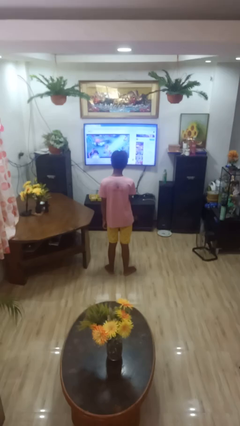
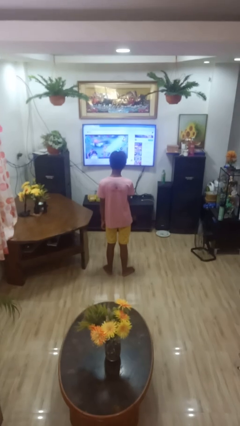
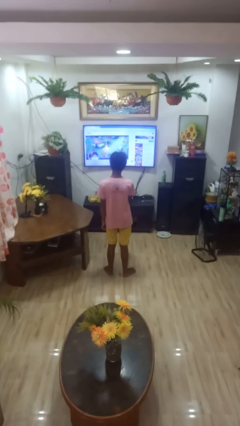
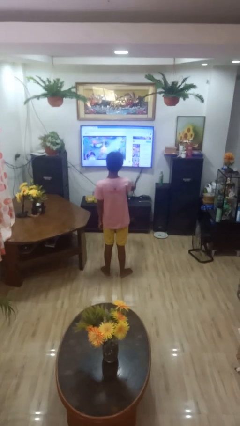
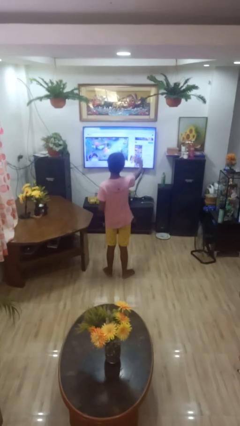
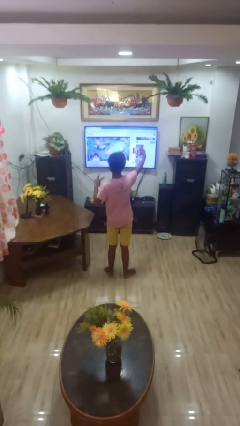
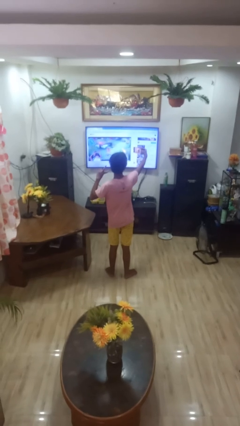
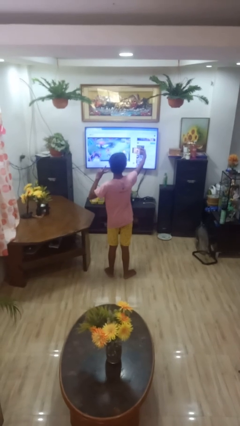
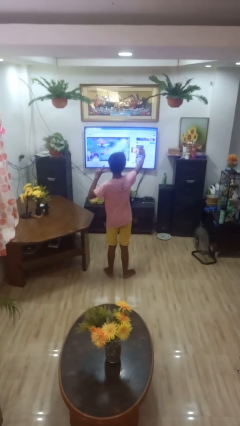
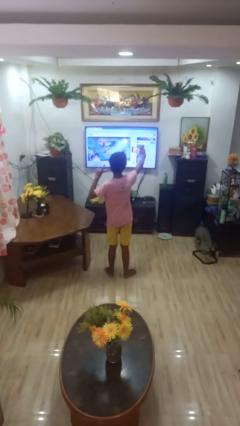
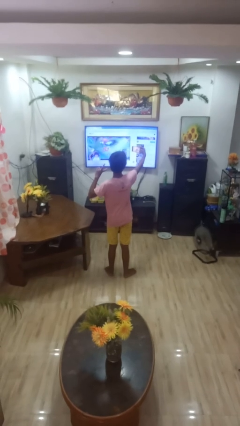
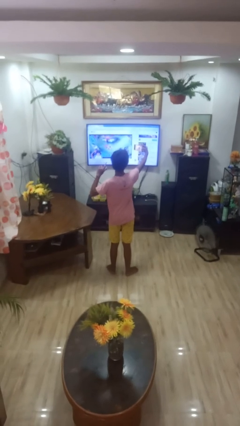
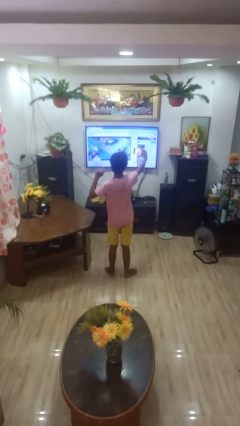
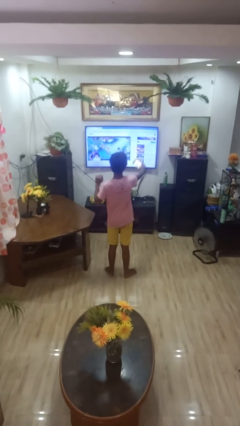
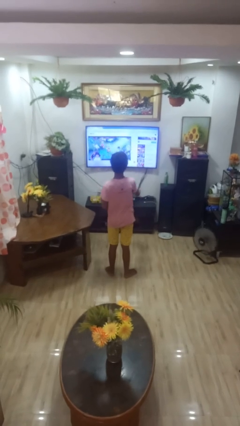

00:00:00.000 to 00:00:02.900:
person takes selfie

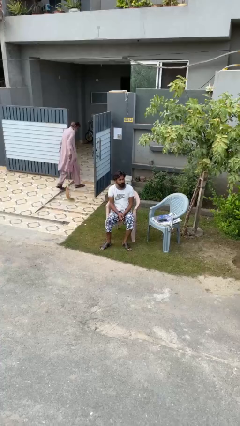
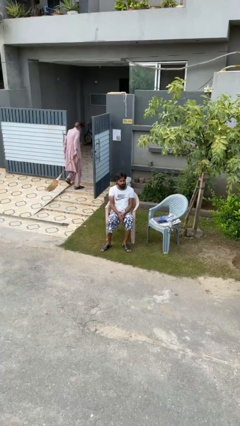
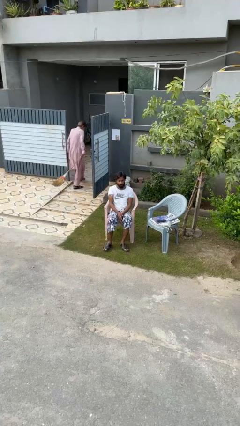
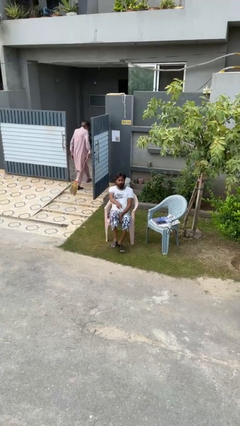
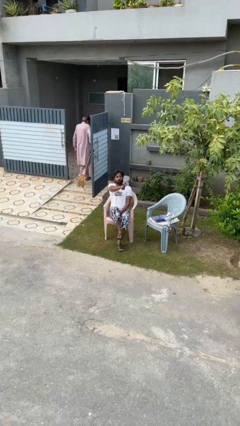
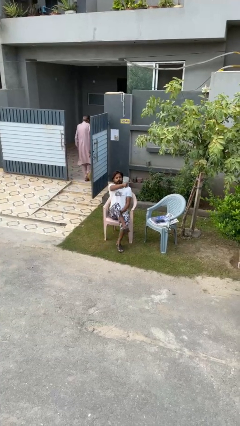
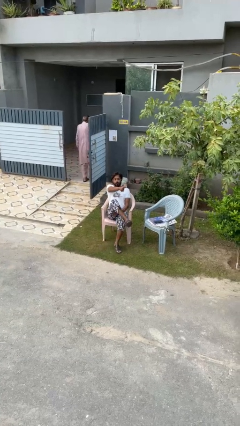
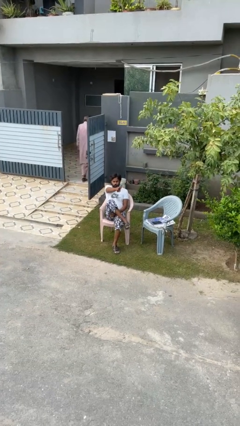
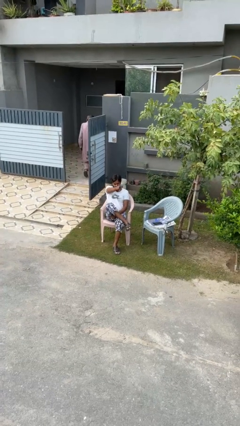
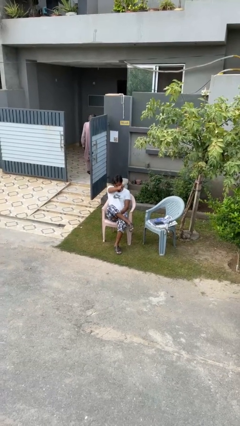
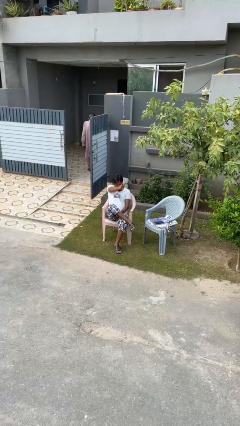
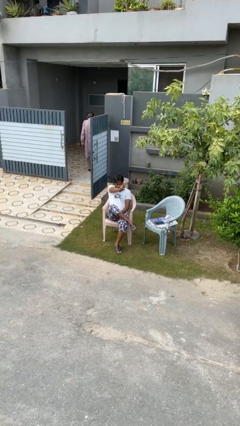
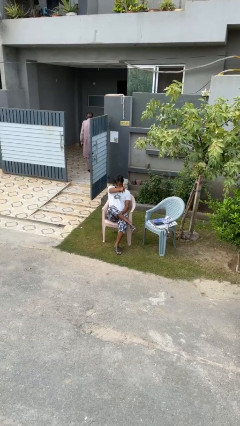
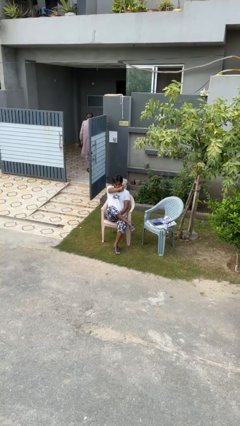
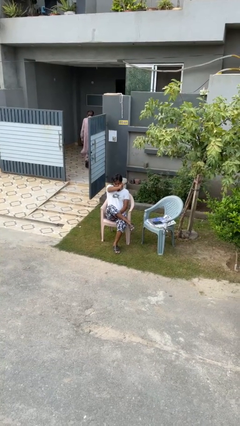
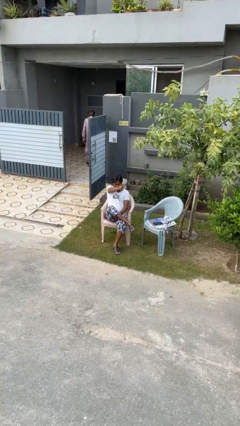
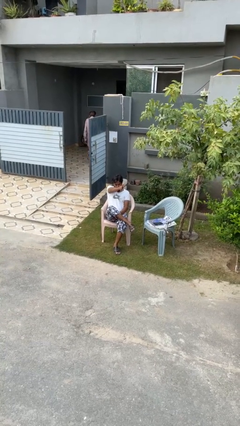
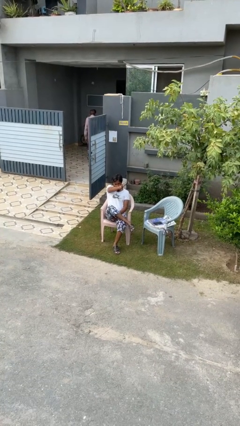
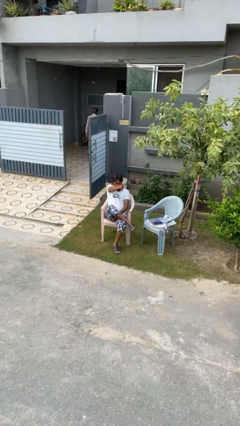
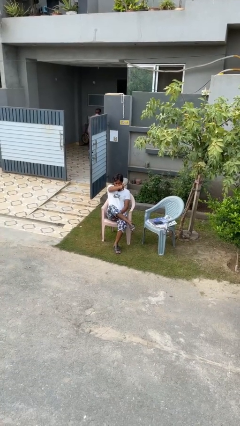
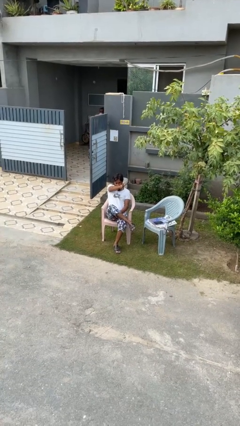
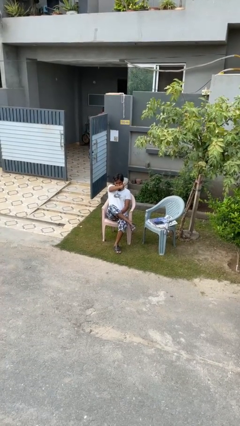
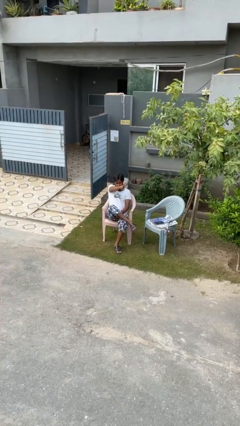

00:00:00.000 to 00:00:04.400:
person gestures peace

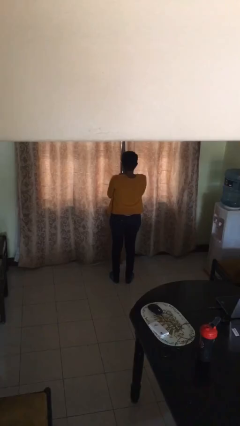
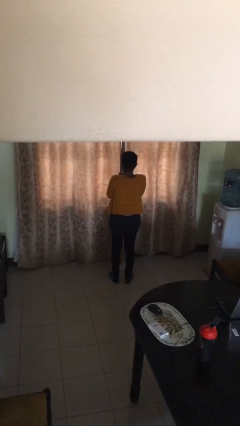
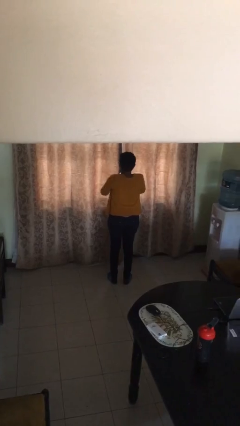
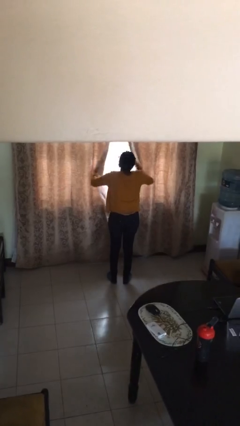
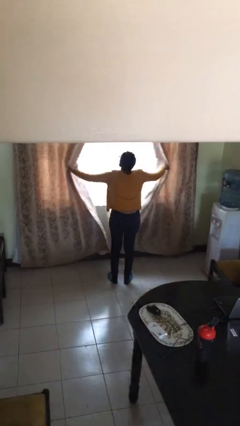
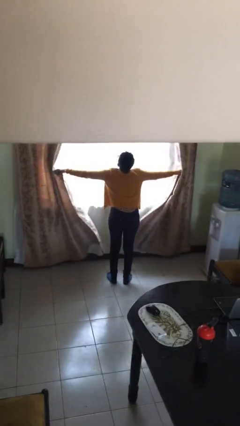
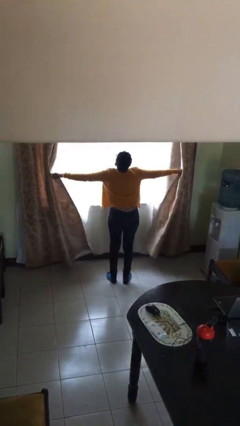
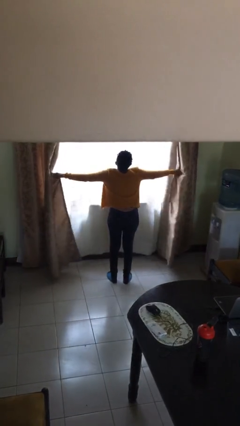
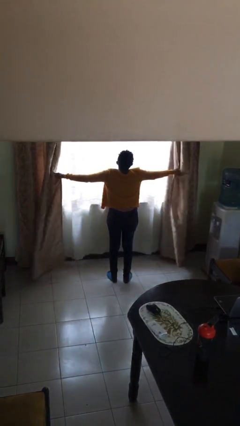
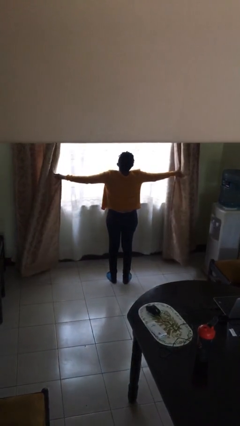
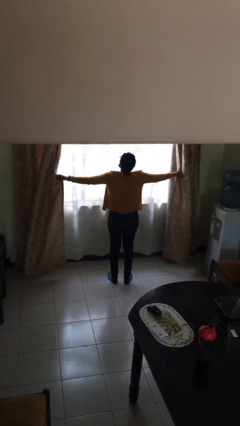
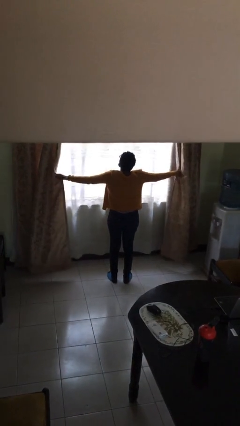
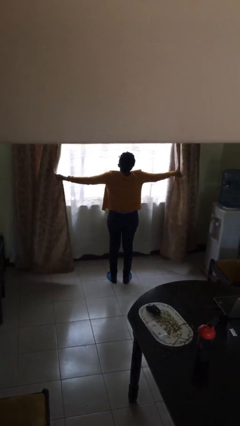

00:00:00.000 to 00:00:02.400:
person opens curtains

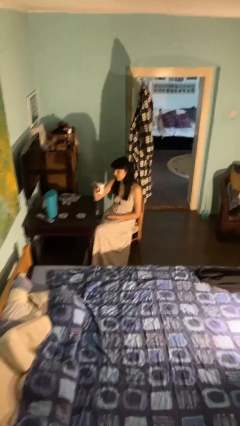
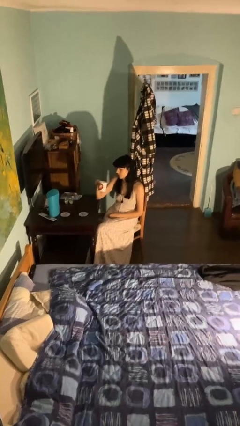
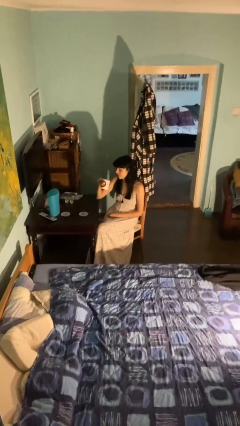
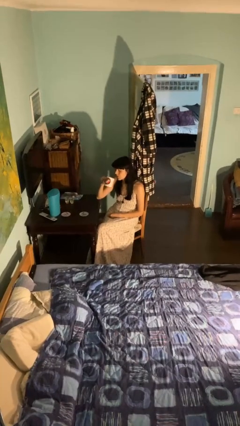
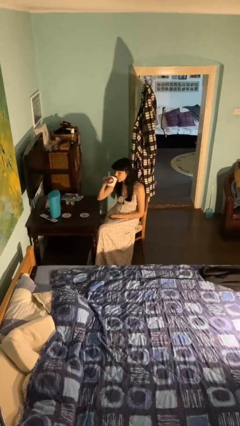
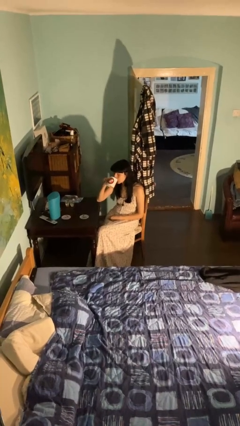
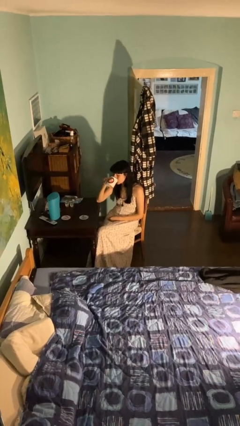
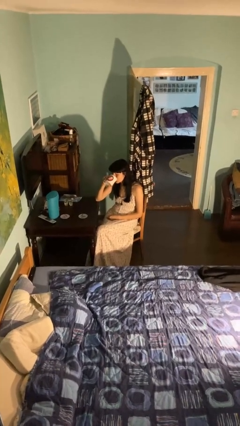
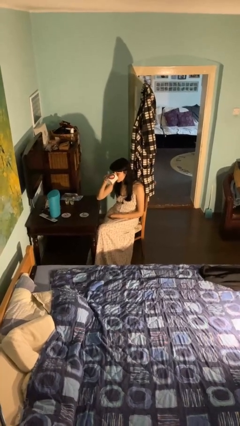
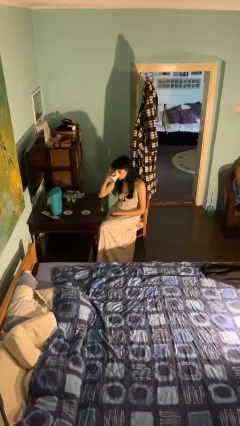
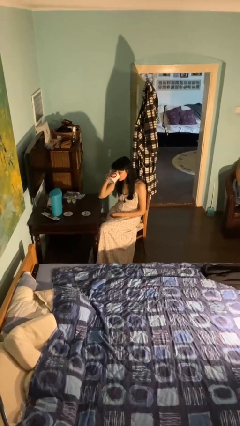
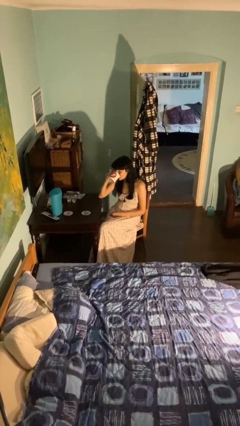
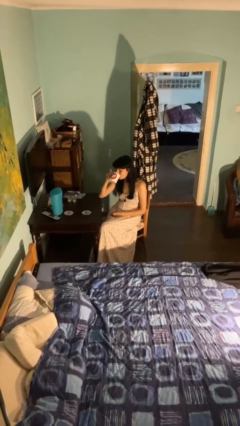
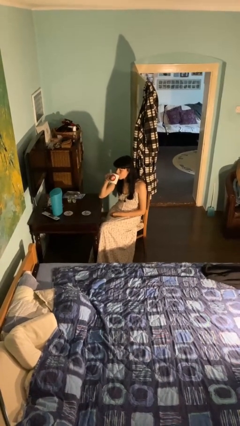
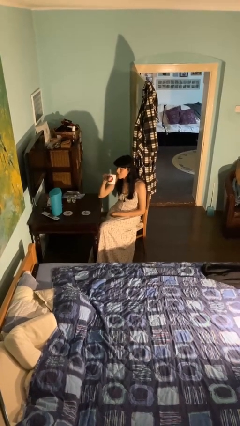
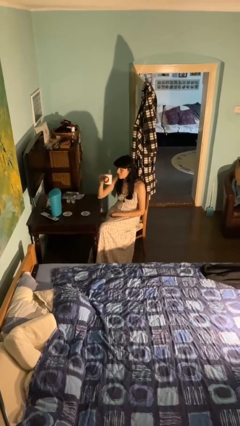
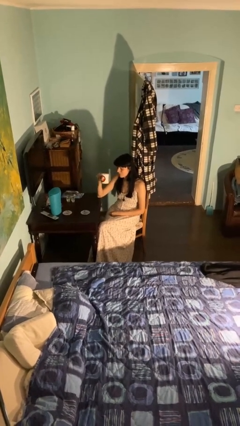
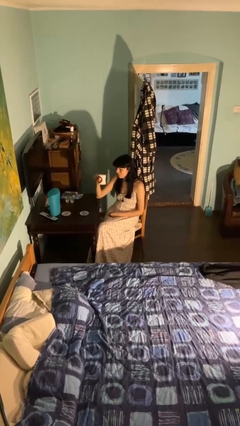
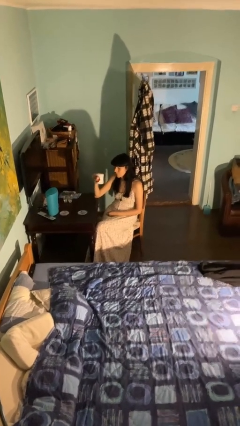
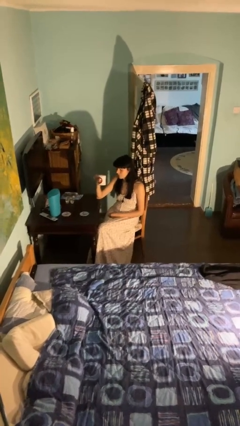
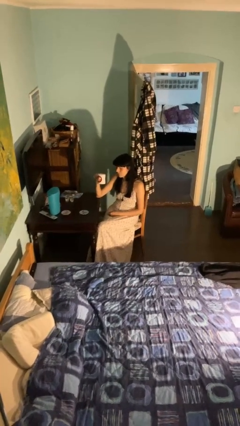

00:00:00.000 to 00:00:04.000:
person drinks from mug

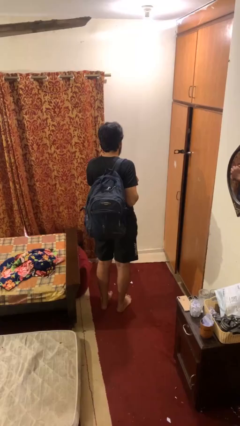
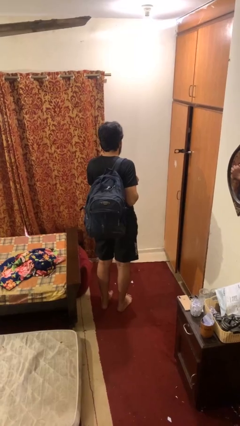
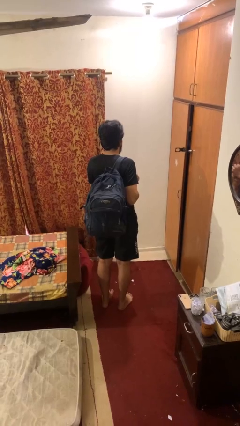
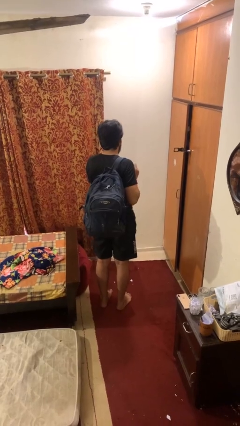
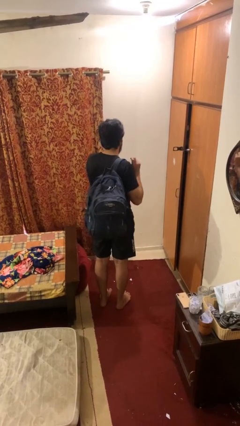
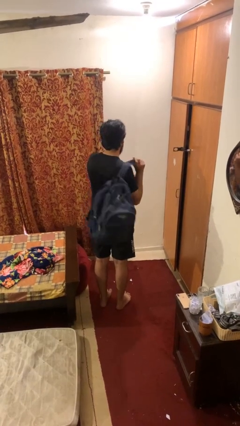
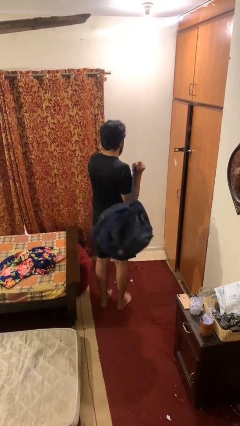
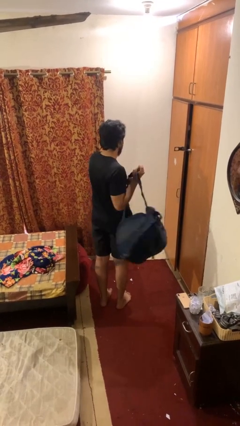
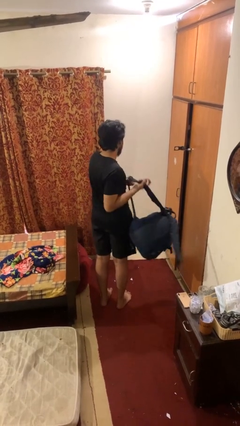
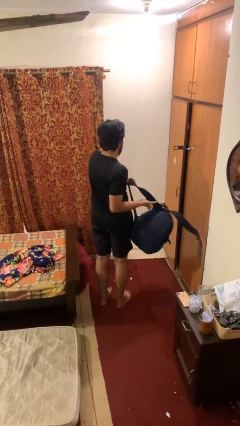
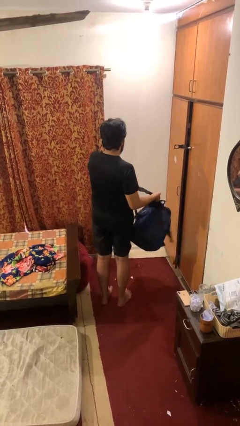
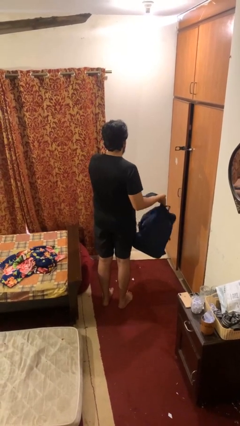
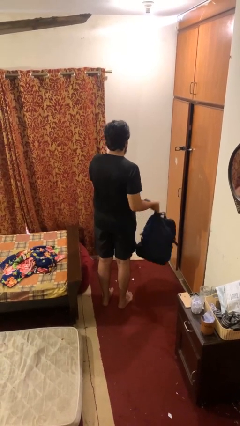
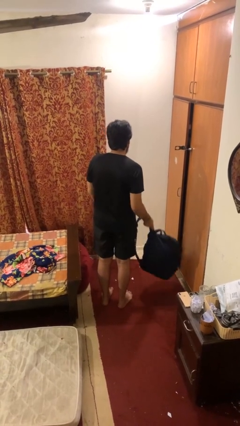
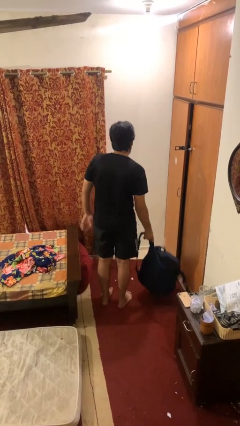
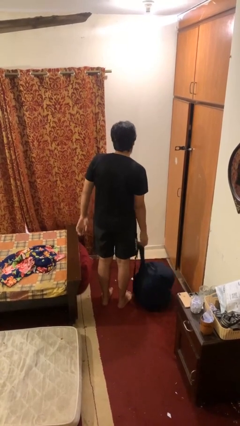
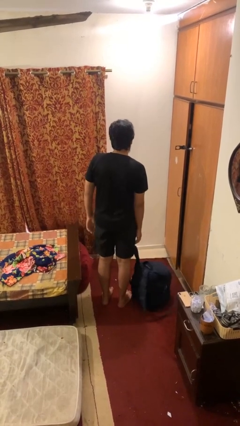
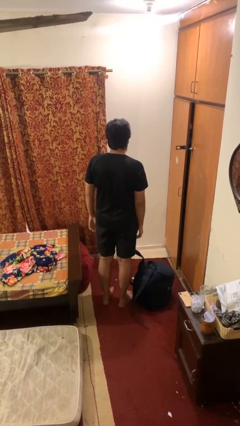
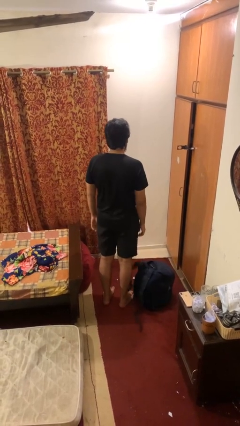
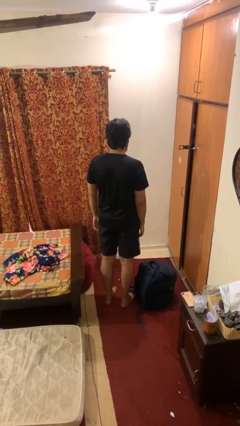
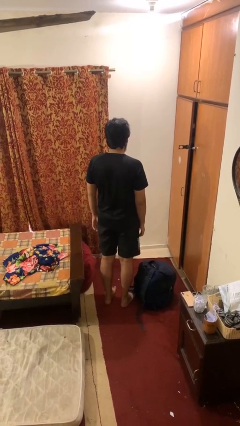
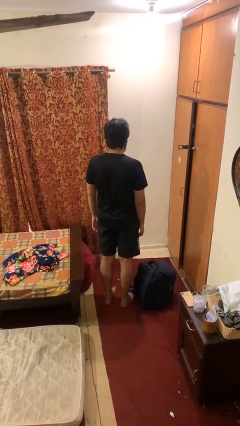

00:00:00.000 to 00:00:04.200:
person takes off backpack
